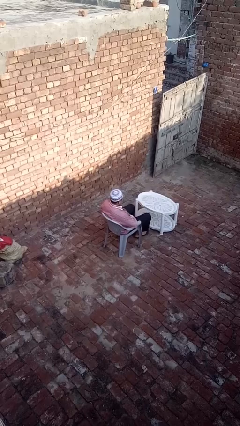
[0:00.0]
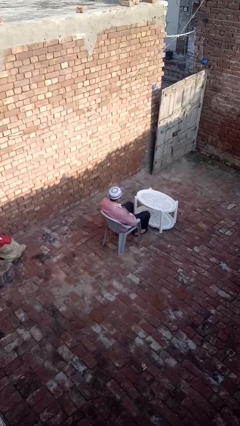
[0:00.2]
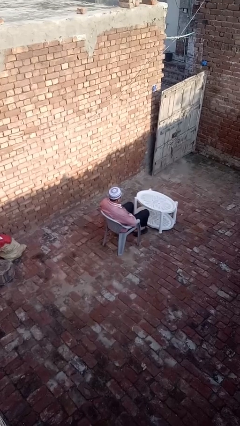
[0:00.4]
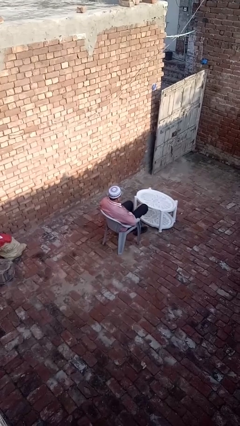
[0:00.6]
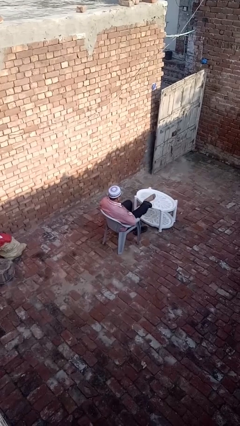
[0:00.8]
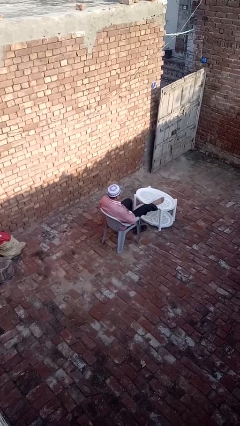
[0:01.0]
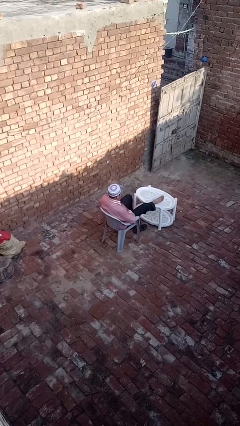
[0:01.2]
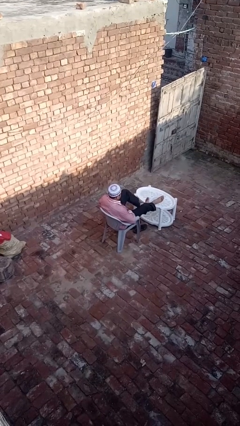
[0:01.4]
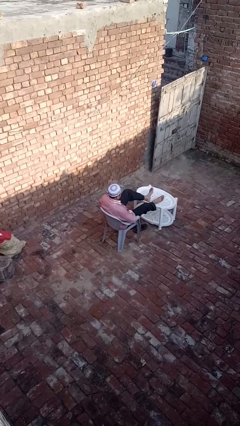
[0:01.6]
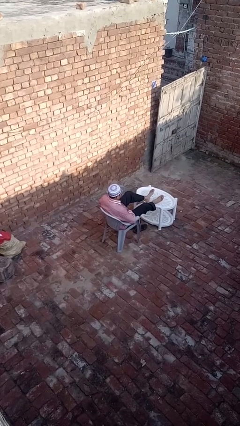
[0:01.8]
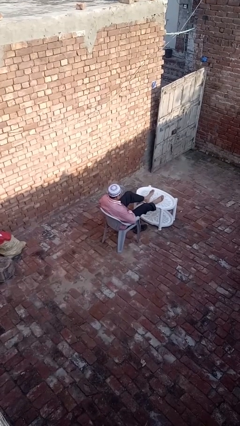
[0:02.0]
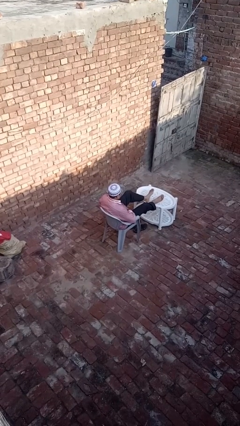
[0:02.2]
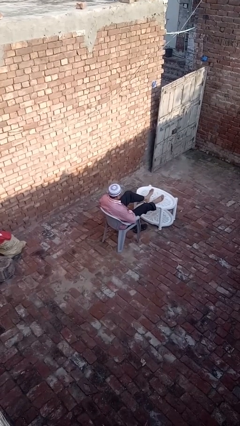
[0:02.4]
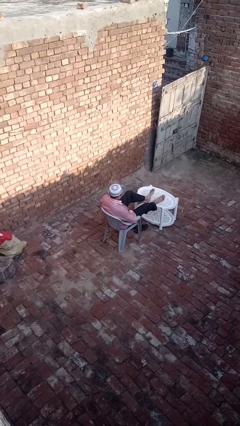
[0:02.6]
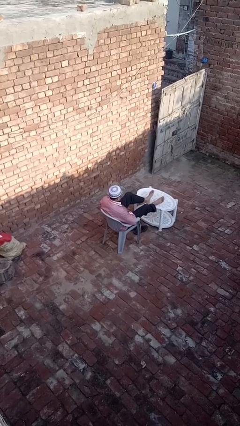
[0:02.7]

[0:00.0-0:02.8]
person puts feet up

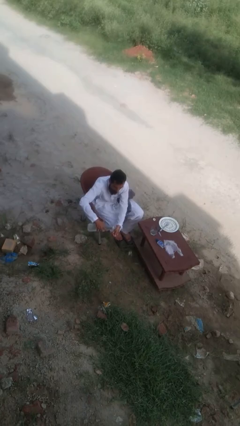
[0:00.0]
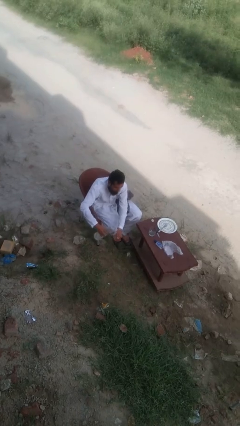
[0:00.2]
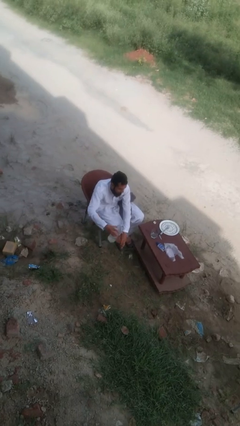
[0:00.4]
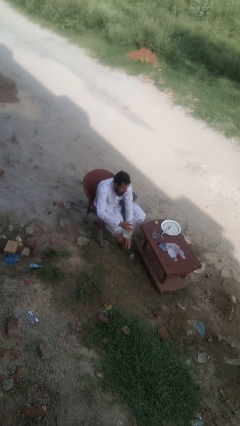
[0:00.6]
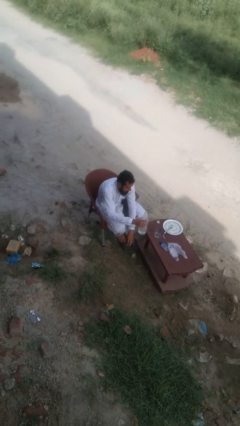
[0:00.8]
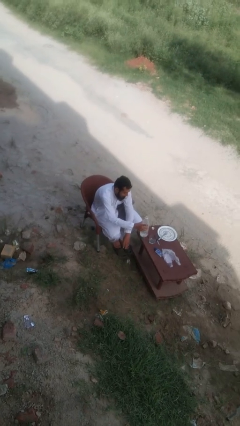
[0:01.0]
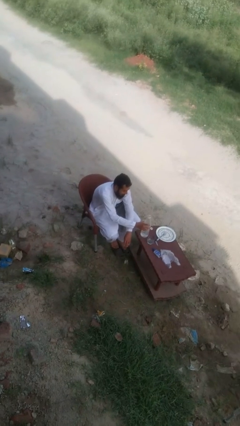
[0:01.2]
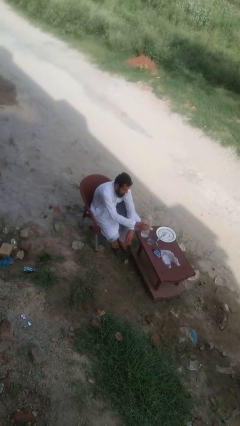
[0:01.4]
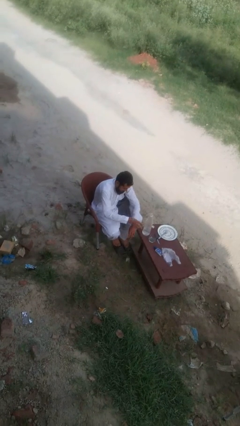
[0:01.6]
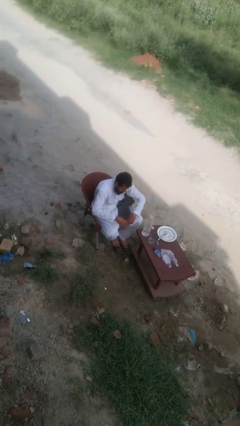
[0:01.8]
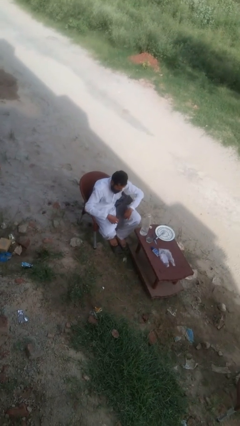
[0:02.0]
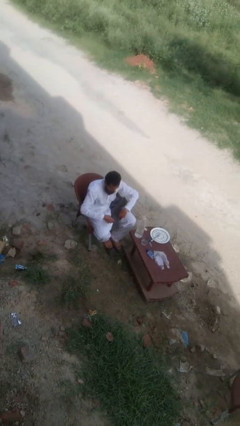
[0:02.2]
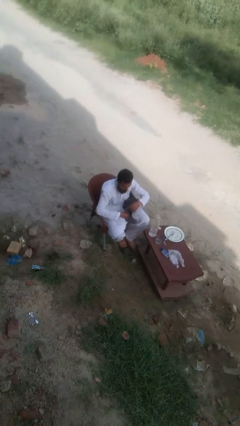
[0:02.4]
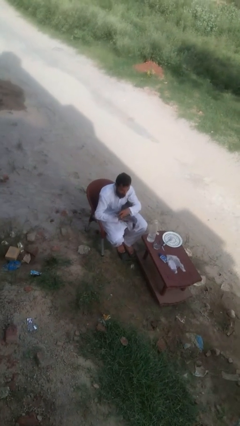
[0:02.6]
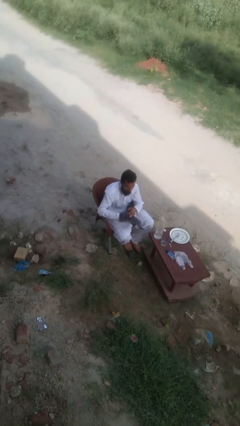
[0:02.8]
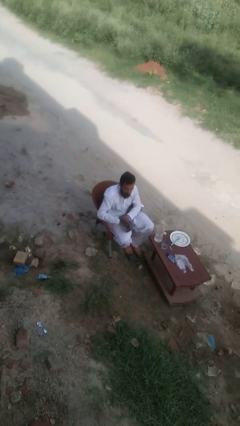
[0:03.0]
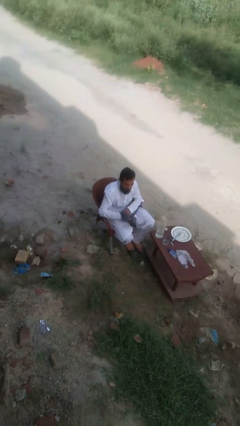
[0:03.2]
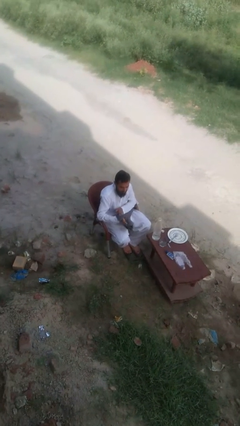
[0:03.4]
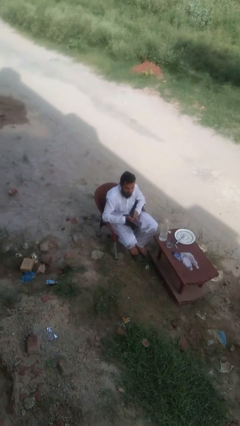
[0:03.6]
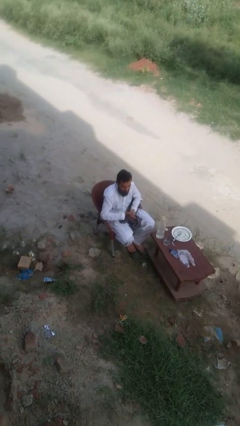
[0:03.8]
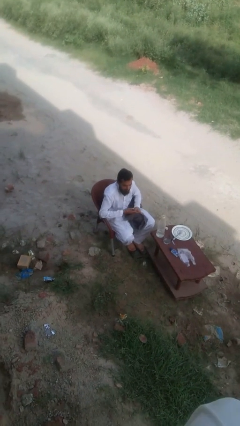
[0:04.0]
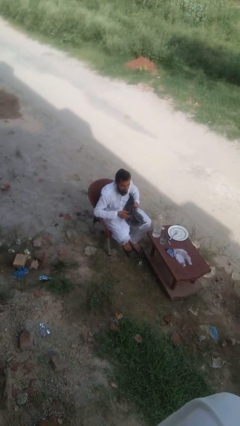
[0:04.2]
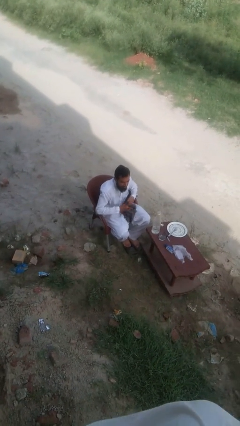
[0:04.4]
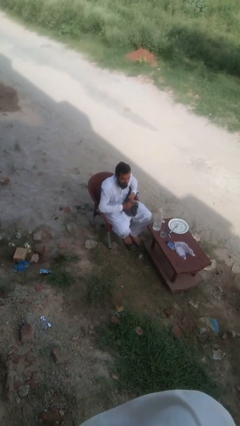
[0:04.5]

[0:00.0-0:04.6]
person dries hands with towel

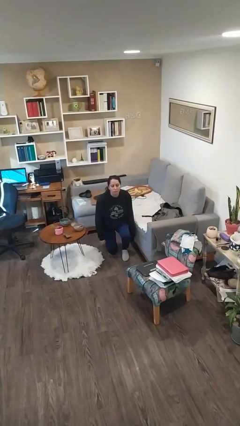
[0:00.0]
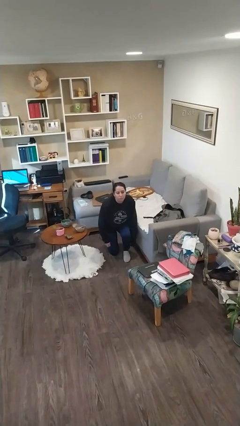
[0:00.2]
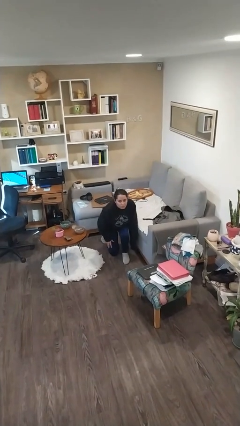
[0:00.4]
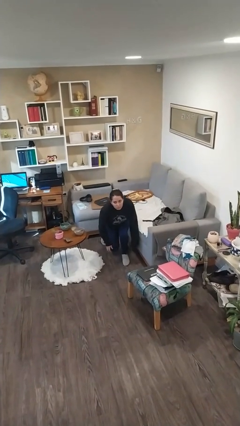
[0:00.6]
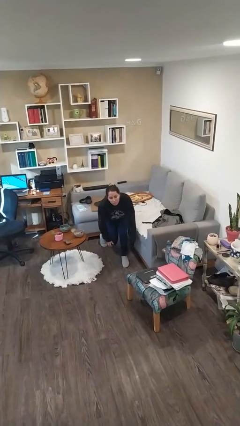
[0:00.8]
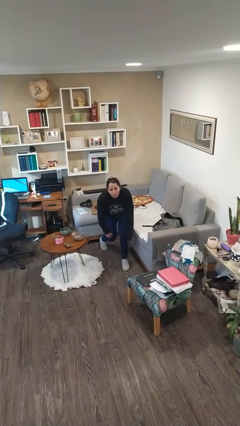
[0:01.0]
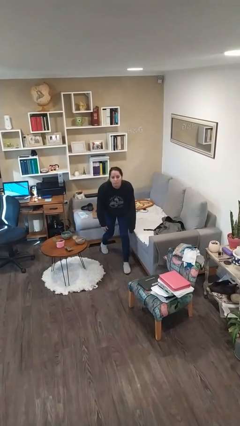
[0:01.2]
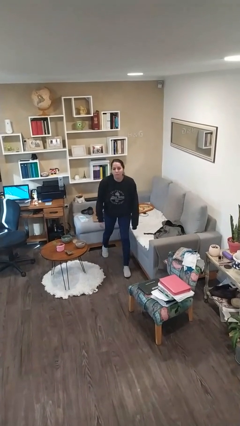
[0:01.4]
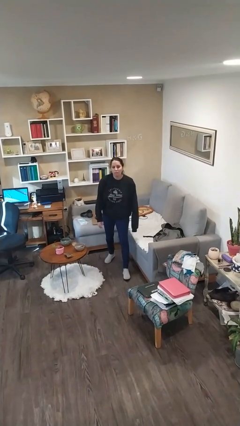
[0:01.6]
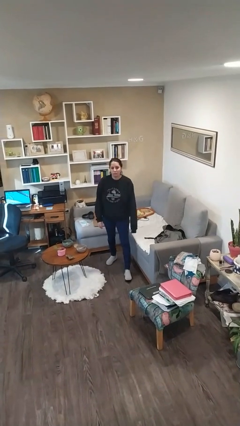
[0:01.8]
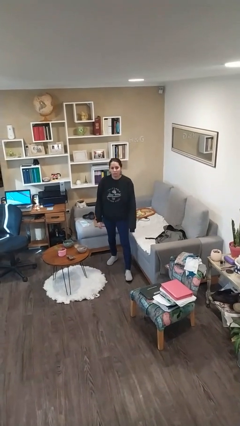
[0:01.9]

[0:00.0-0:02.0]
person stands up from floor

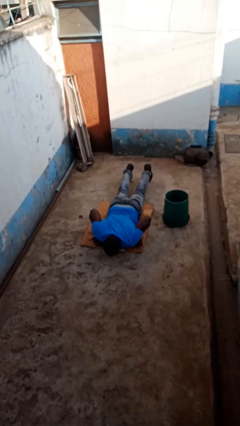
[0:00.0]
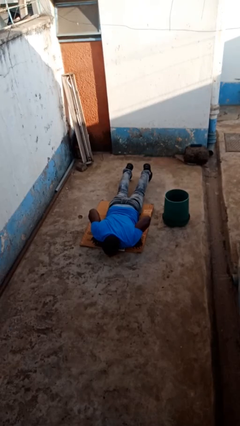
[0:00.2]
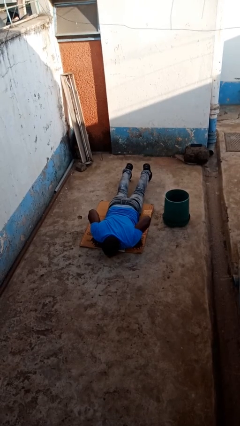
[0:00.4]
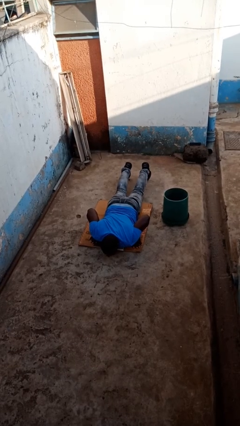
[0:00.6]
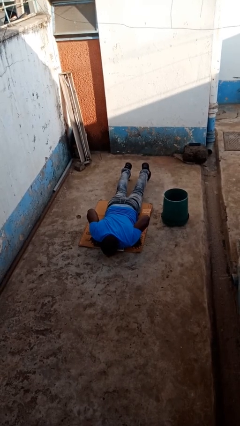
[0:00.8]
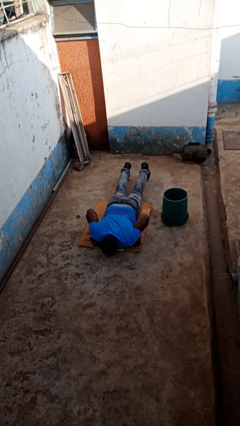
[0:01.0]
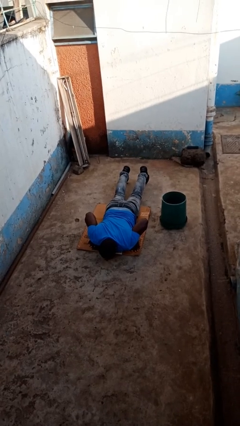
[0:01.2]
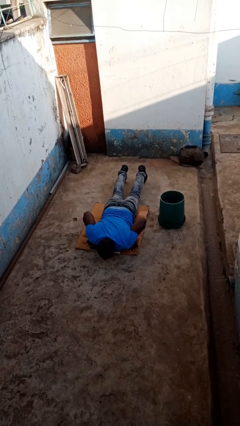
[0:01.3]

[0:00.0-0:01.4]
person lies down on floor

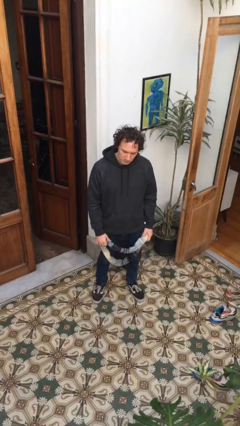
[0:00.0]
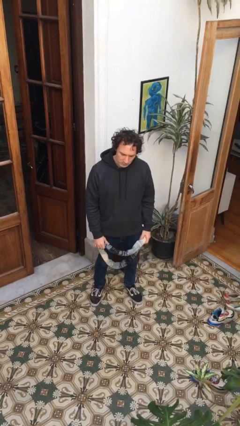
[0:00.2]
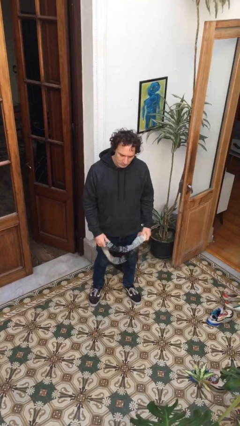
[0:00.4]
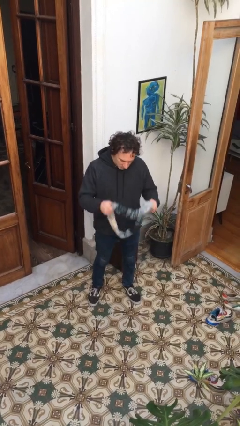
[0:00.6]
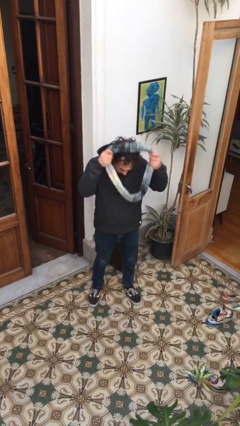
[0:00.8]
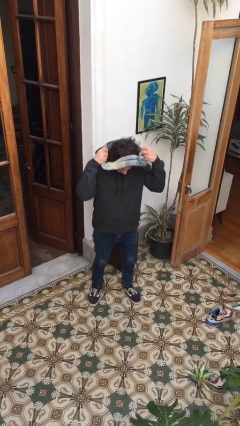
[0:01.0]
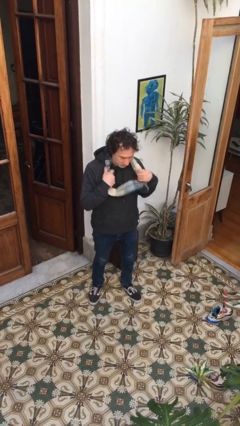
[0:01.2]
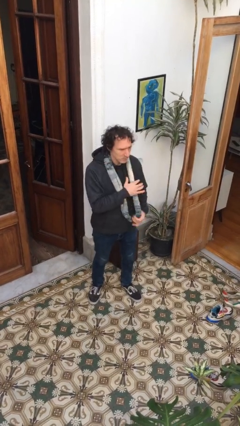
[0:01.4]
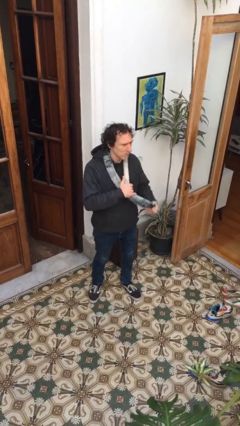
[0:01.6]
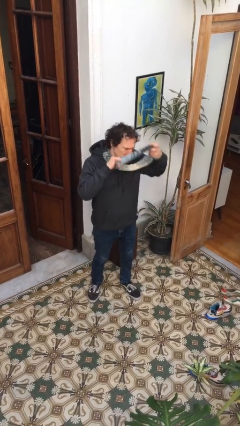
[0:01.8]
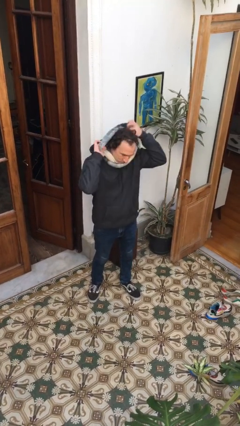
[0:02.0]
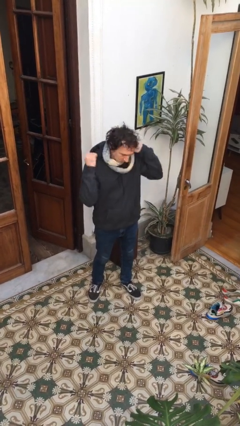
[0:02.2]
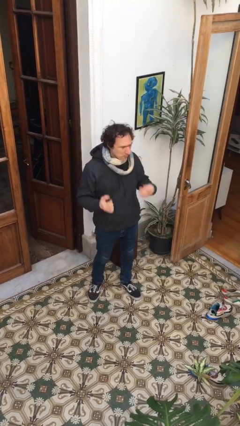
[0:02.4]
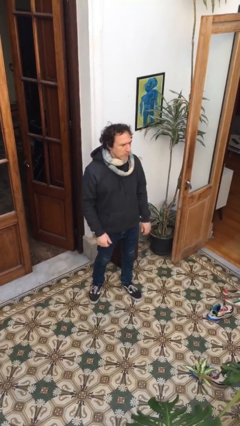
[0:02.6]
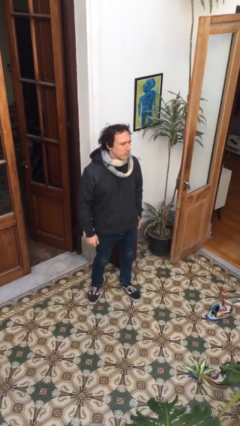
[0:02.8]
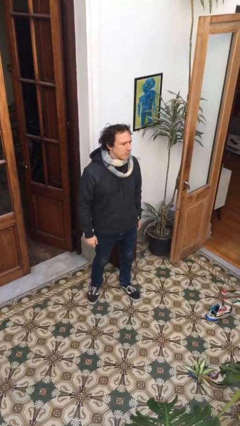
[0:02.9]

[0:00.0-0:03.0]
person puts on scarf

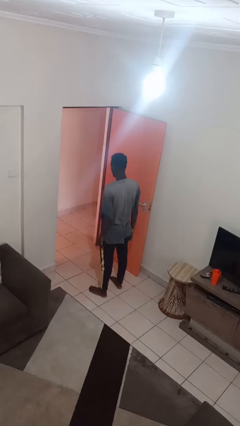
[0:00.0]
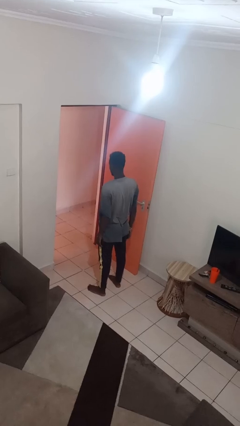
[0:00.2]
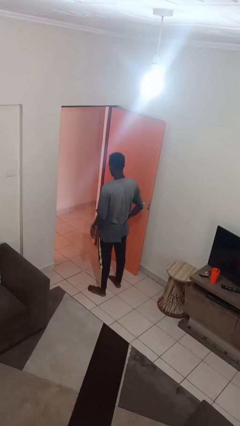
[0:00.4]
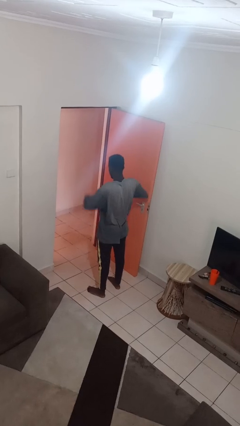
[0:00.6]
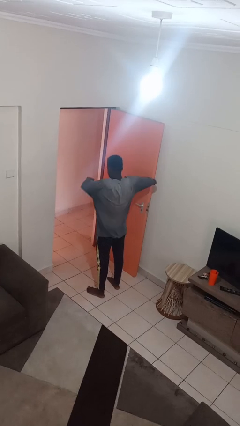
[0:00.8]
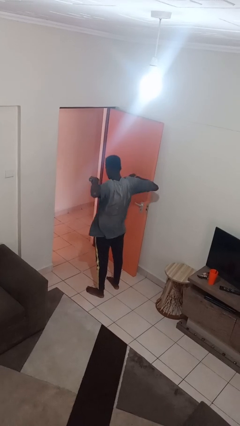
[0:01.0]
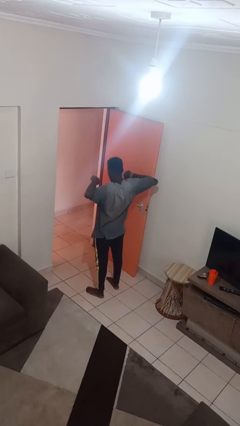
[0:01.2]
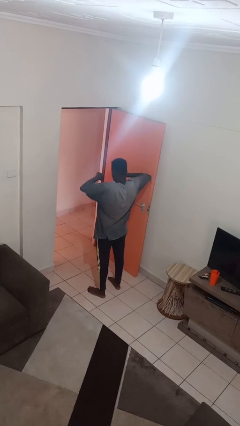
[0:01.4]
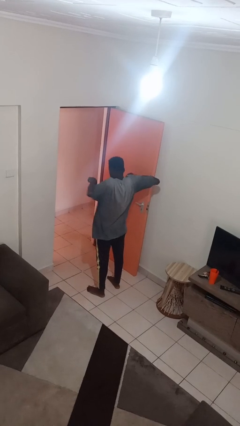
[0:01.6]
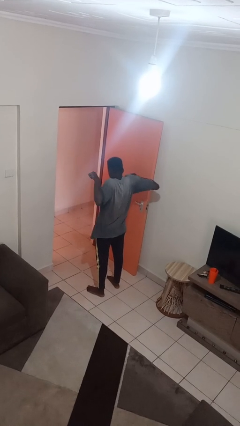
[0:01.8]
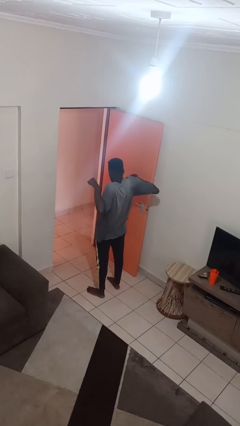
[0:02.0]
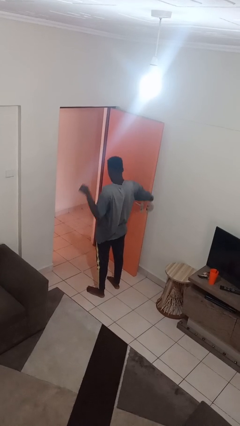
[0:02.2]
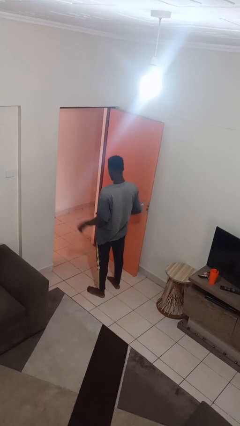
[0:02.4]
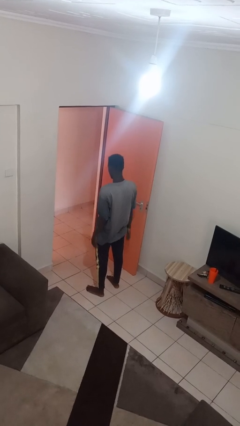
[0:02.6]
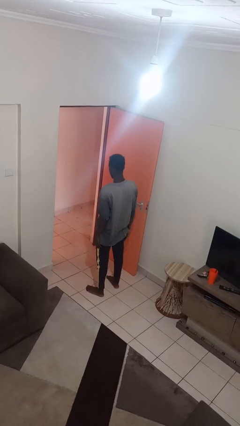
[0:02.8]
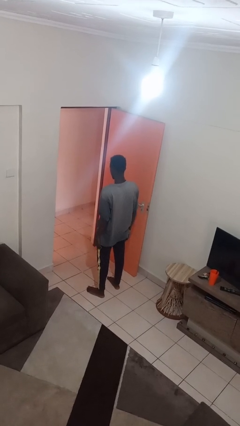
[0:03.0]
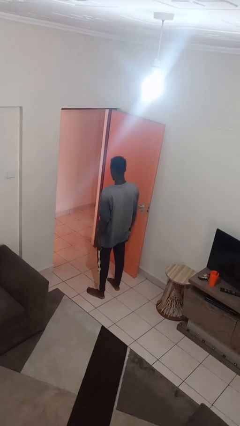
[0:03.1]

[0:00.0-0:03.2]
person stretches arms to side

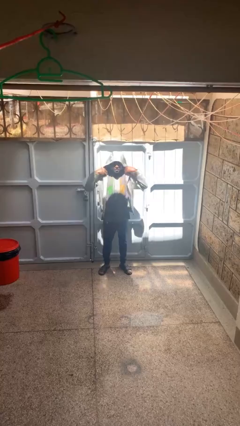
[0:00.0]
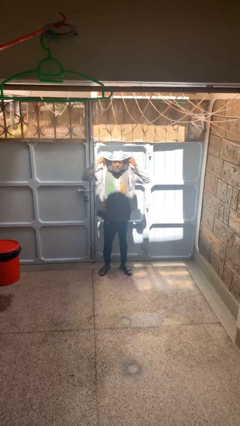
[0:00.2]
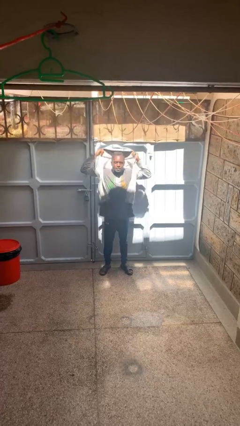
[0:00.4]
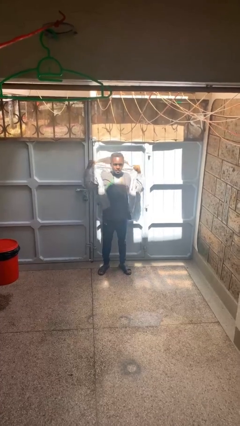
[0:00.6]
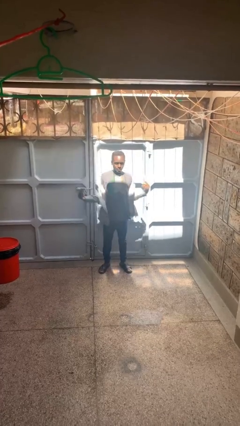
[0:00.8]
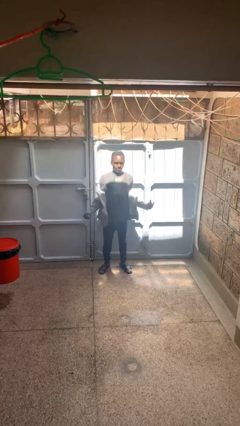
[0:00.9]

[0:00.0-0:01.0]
person takes off hoodie
